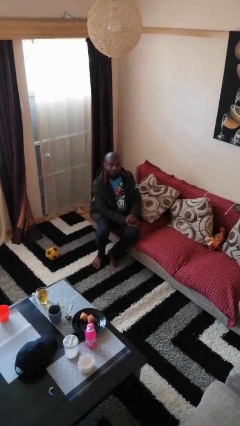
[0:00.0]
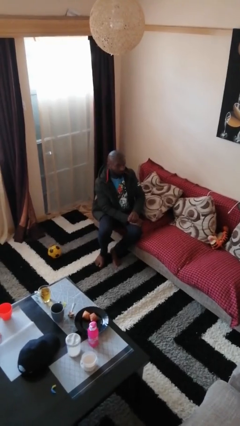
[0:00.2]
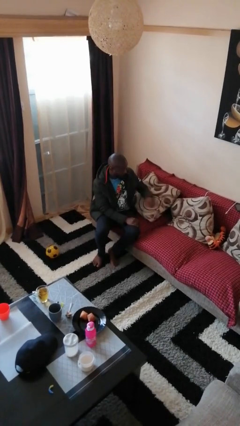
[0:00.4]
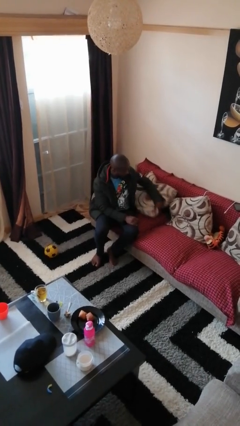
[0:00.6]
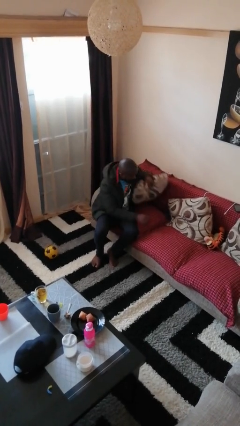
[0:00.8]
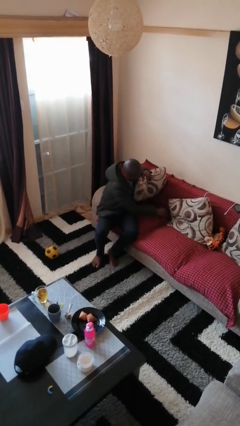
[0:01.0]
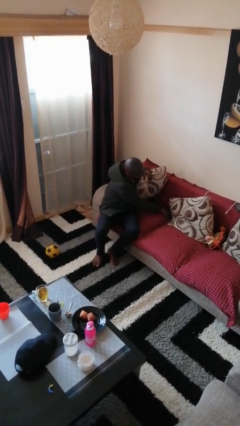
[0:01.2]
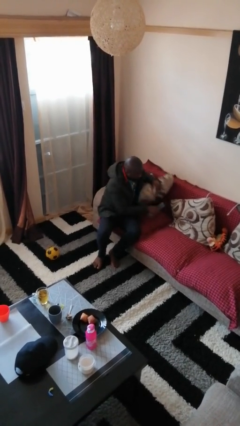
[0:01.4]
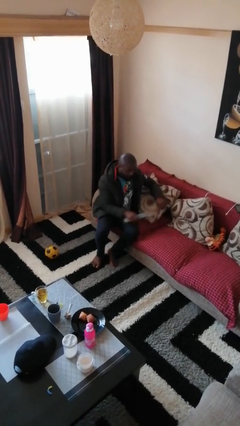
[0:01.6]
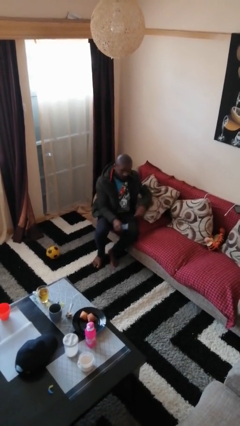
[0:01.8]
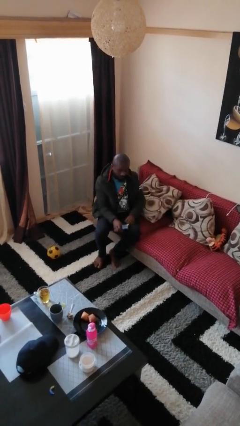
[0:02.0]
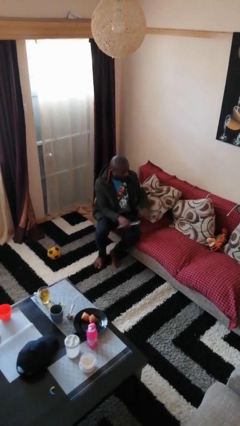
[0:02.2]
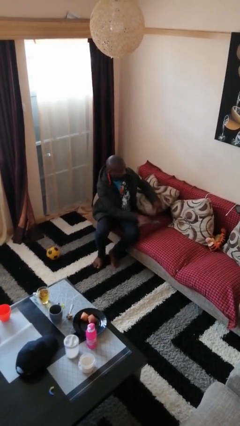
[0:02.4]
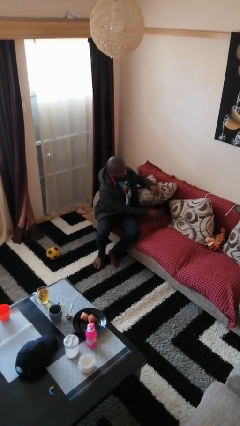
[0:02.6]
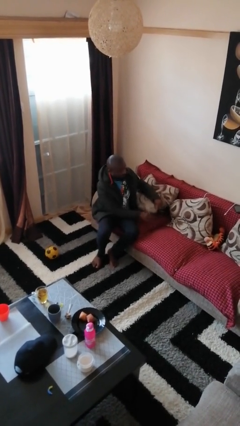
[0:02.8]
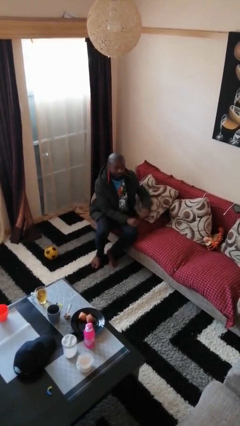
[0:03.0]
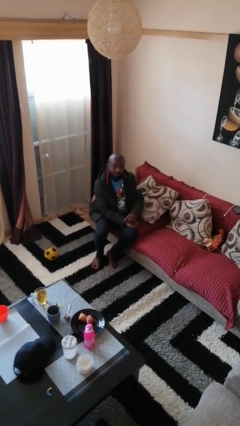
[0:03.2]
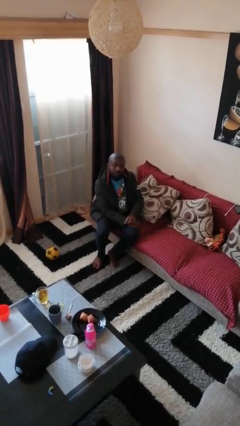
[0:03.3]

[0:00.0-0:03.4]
person searches in couch

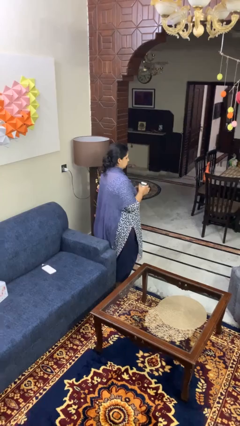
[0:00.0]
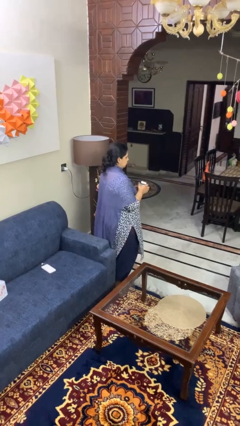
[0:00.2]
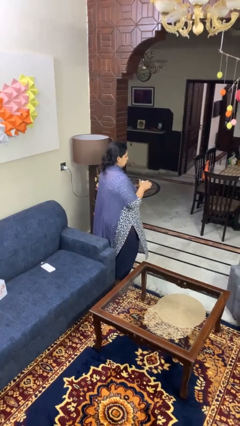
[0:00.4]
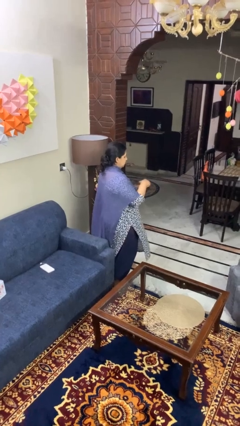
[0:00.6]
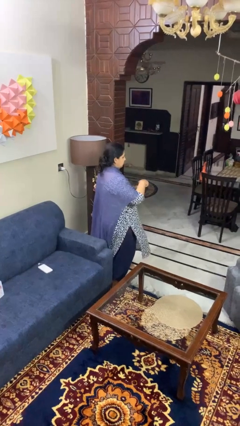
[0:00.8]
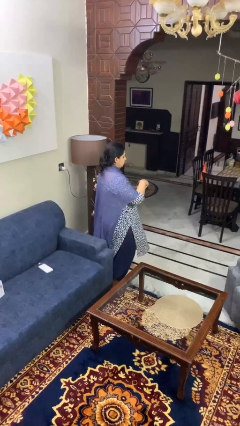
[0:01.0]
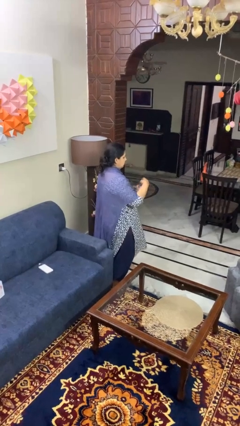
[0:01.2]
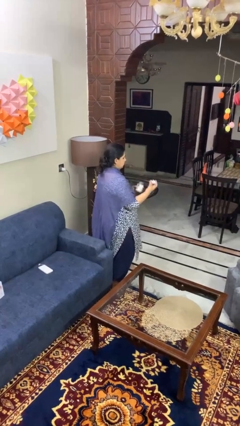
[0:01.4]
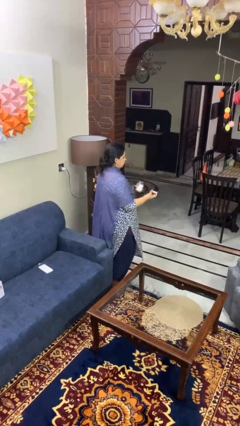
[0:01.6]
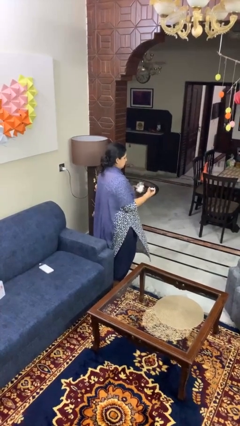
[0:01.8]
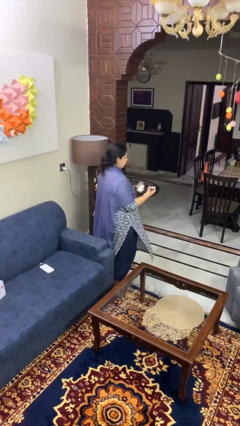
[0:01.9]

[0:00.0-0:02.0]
person opens jar

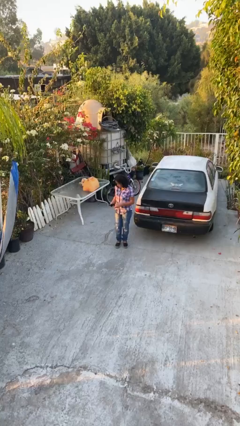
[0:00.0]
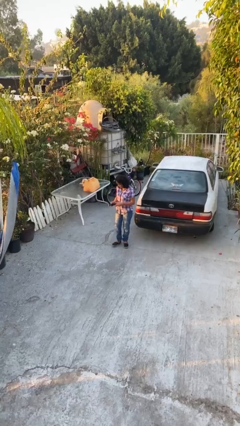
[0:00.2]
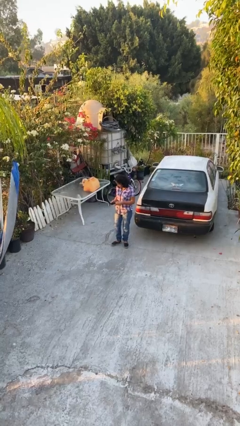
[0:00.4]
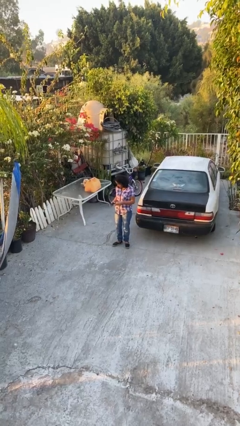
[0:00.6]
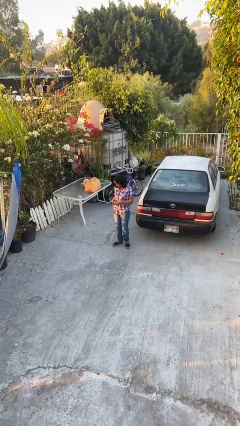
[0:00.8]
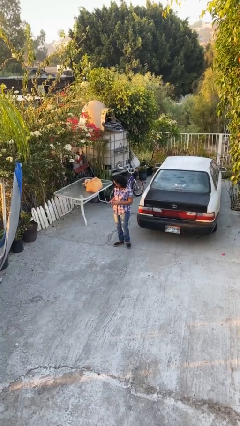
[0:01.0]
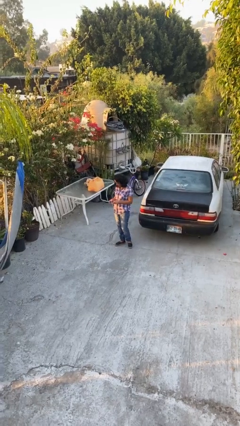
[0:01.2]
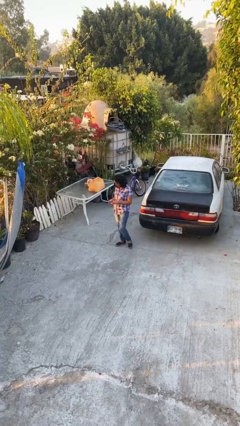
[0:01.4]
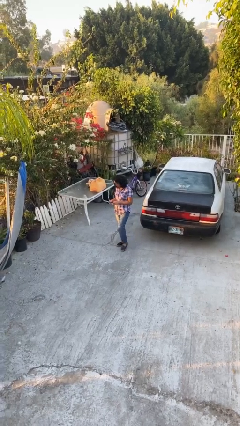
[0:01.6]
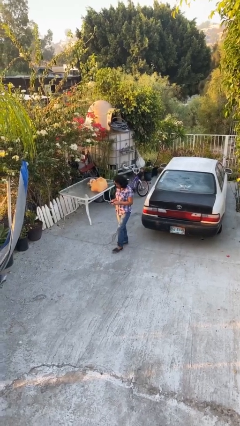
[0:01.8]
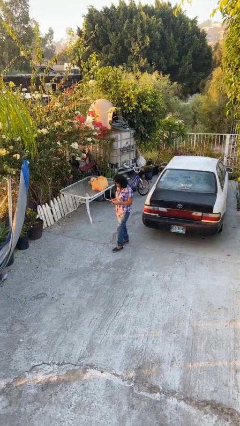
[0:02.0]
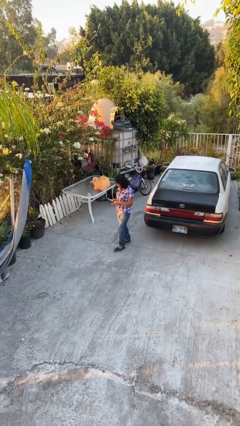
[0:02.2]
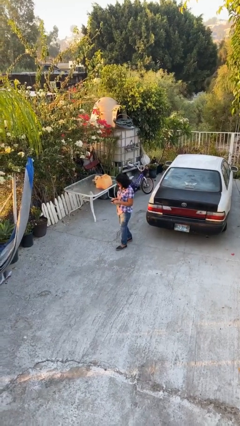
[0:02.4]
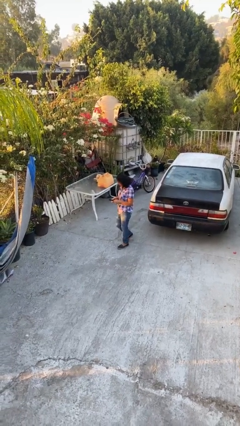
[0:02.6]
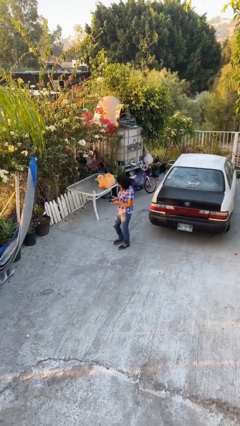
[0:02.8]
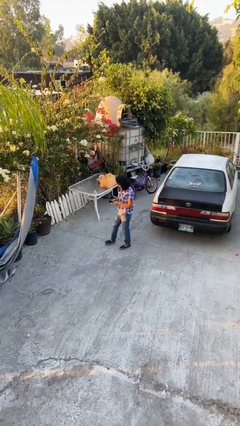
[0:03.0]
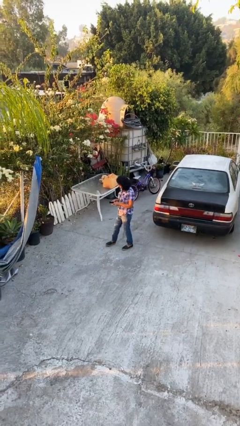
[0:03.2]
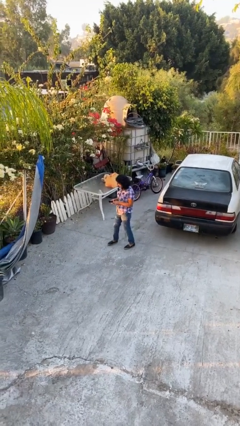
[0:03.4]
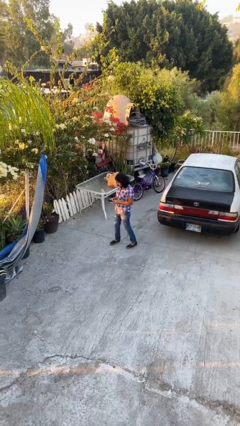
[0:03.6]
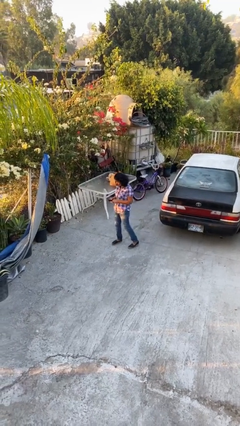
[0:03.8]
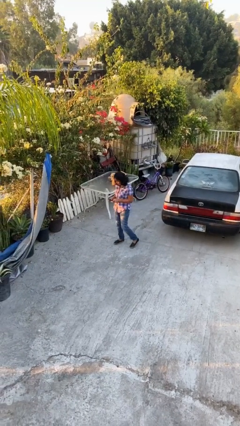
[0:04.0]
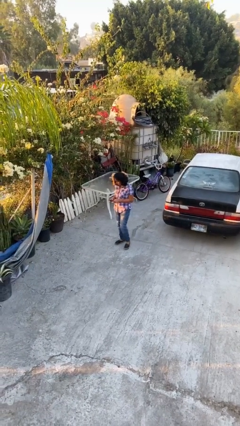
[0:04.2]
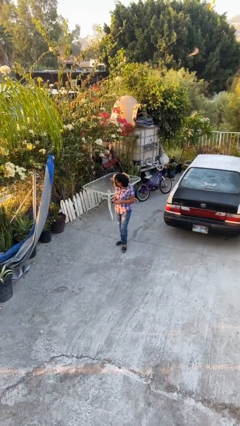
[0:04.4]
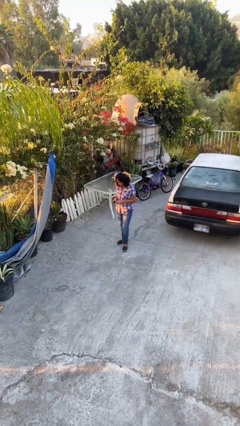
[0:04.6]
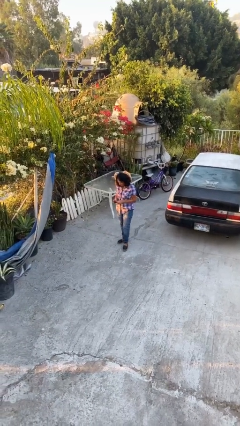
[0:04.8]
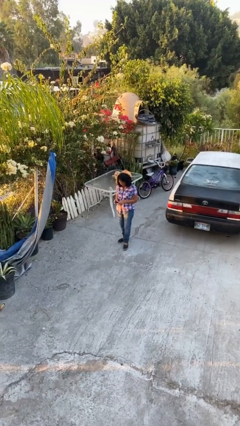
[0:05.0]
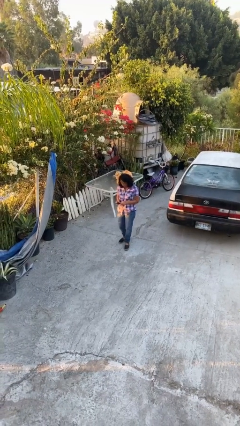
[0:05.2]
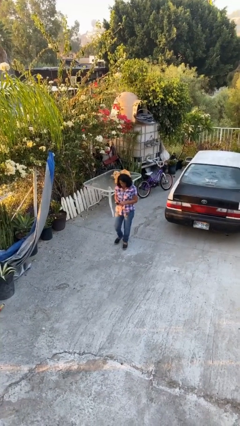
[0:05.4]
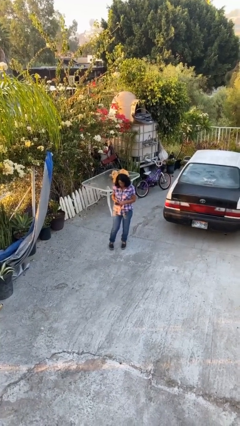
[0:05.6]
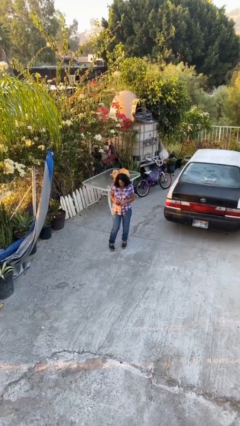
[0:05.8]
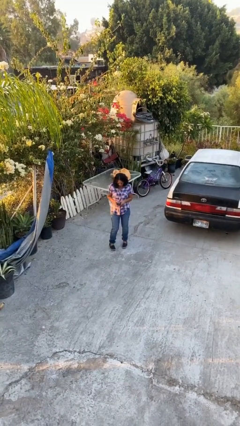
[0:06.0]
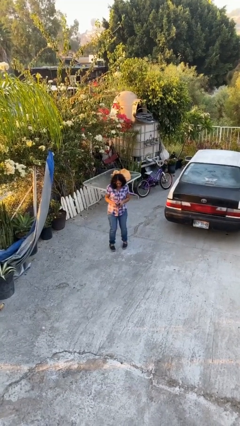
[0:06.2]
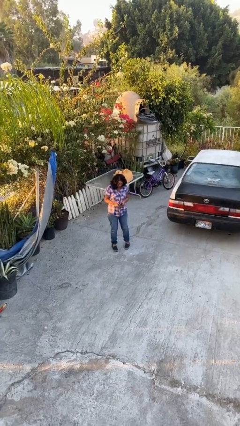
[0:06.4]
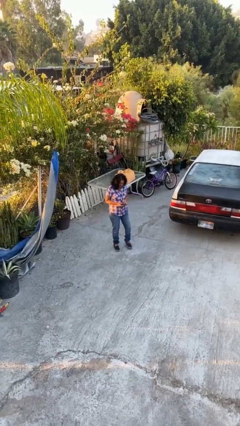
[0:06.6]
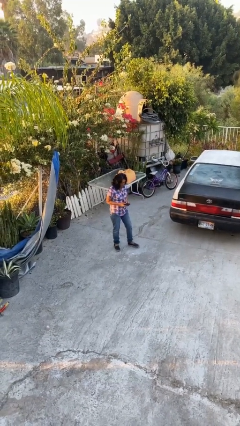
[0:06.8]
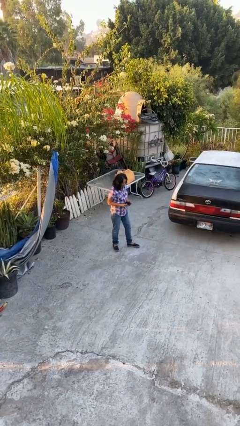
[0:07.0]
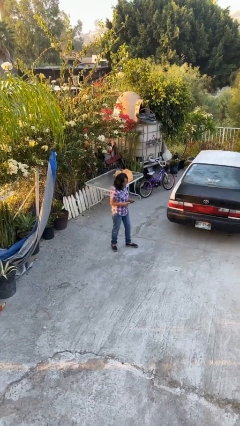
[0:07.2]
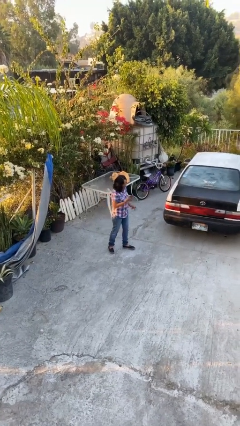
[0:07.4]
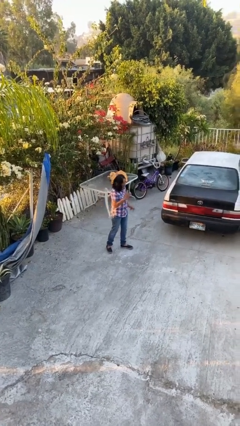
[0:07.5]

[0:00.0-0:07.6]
person texts on phone

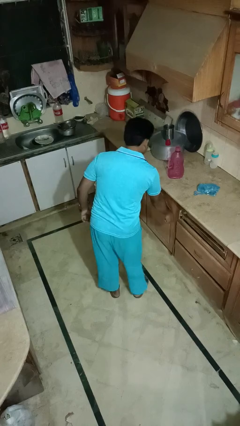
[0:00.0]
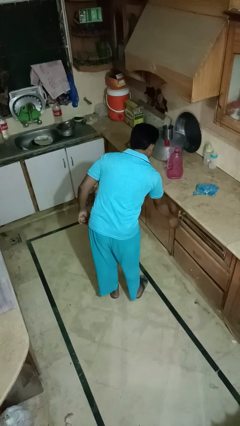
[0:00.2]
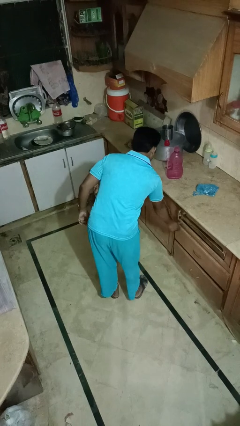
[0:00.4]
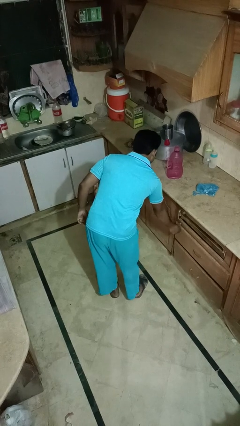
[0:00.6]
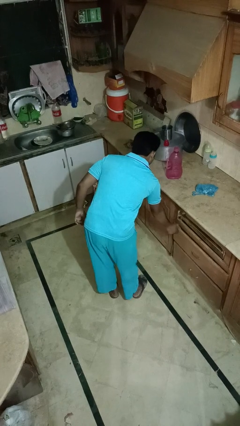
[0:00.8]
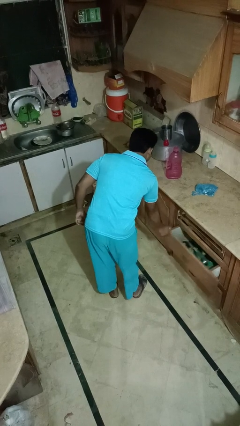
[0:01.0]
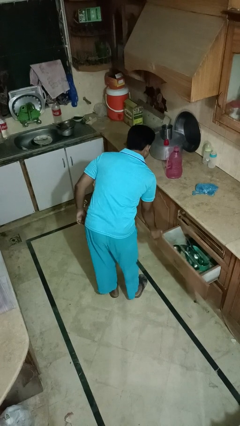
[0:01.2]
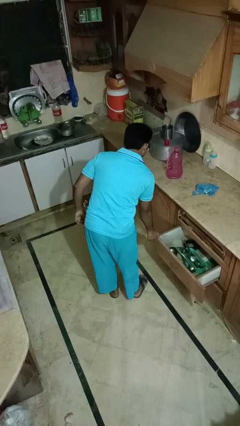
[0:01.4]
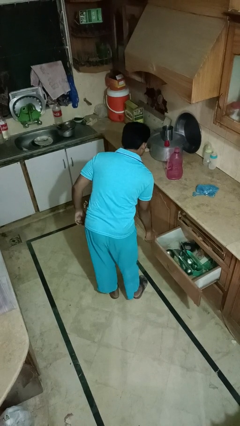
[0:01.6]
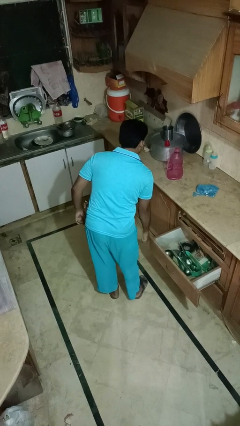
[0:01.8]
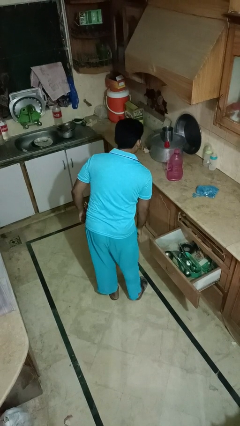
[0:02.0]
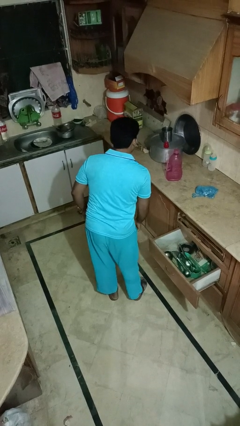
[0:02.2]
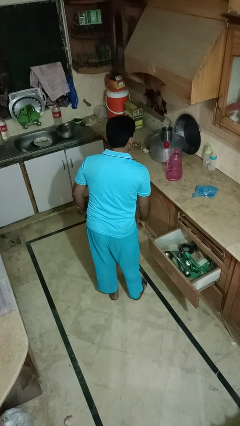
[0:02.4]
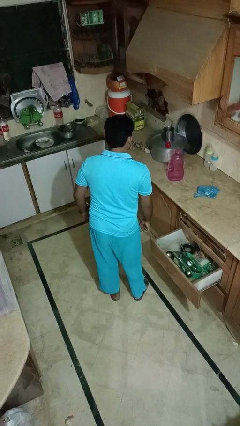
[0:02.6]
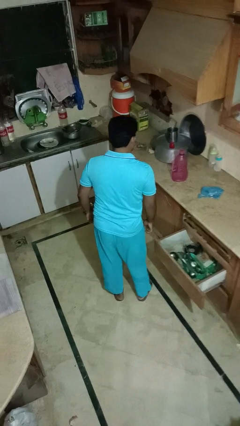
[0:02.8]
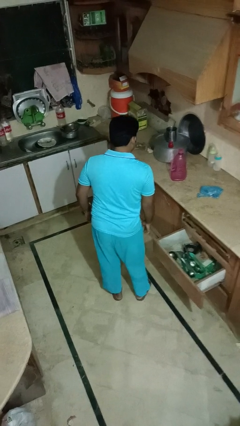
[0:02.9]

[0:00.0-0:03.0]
person opens kitchen drawer

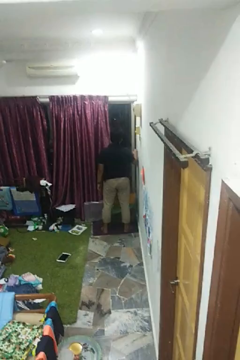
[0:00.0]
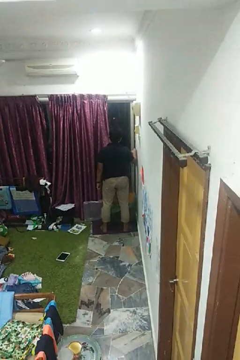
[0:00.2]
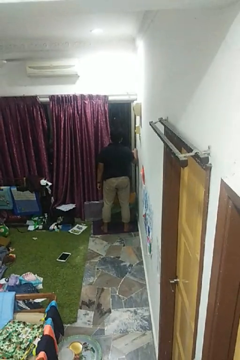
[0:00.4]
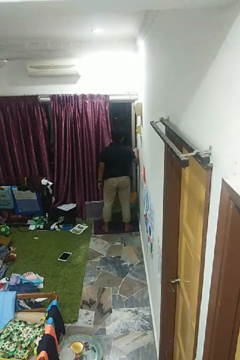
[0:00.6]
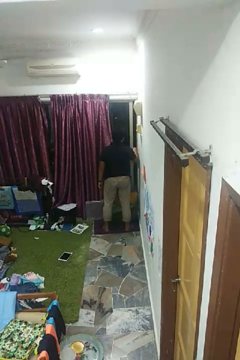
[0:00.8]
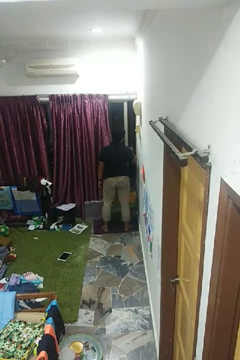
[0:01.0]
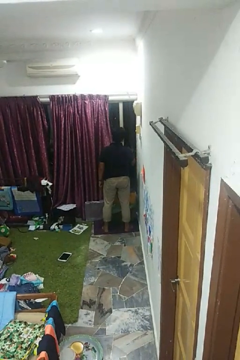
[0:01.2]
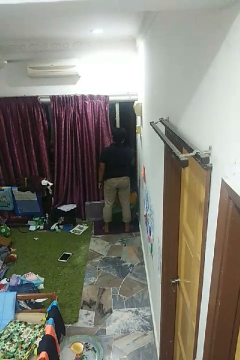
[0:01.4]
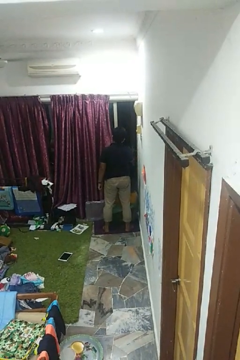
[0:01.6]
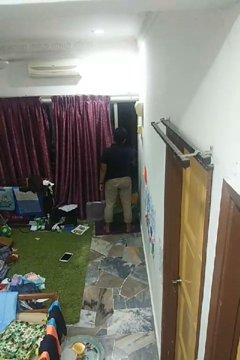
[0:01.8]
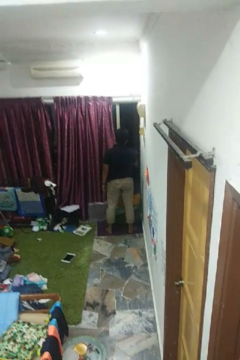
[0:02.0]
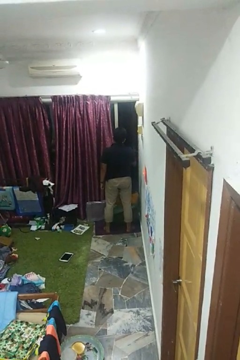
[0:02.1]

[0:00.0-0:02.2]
person opens home window
